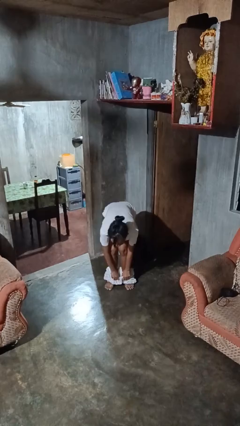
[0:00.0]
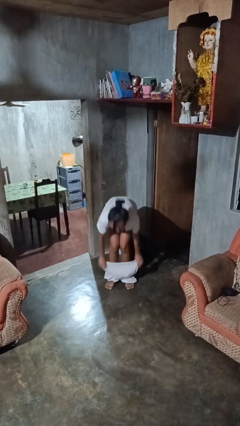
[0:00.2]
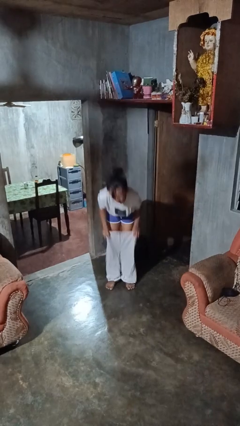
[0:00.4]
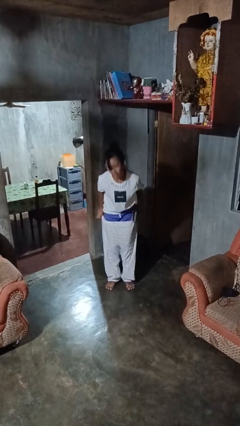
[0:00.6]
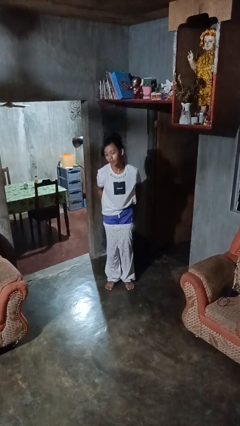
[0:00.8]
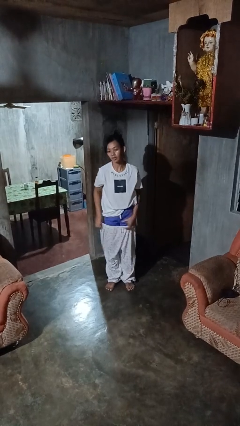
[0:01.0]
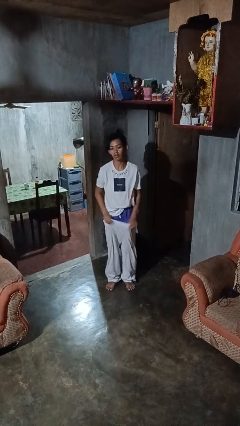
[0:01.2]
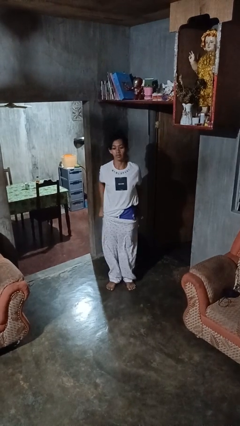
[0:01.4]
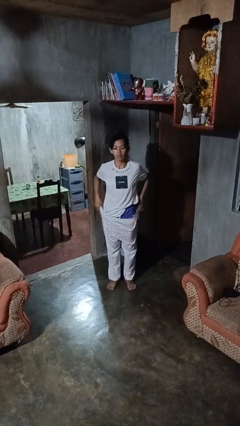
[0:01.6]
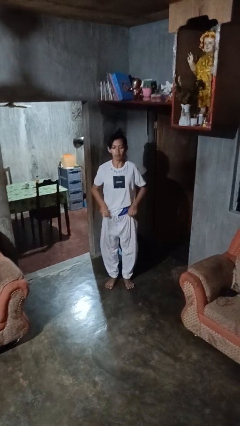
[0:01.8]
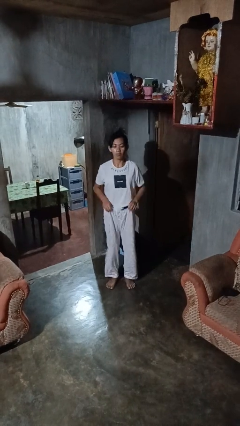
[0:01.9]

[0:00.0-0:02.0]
person puts on pants

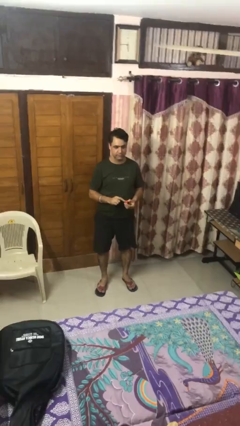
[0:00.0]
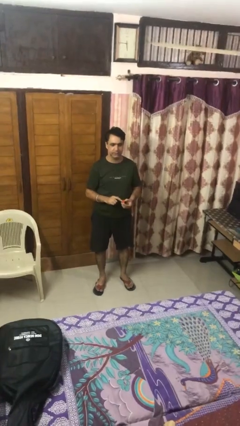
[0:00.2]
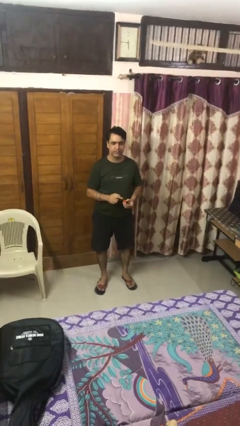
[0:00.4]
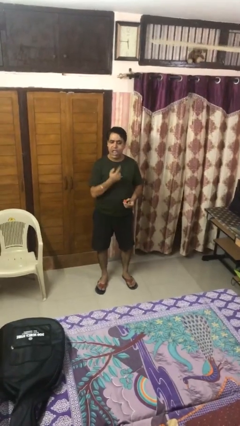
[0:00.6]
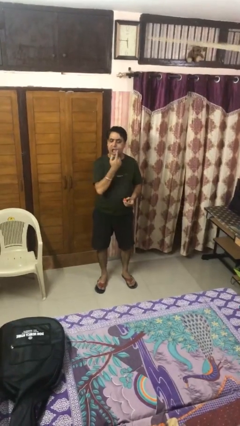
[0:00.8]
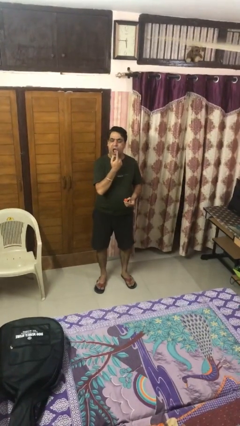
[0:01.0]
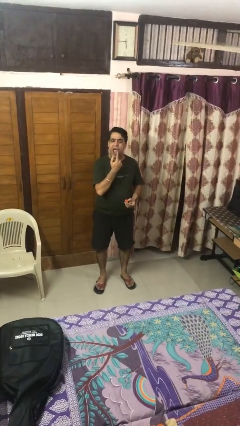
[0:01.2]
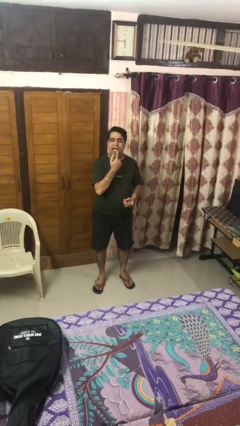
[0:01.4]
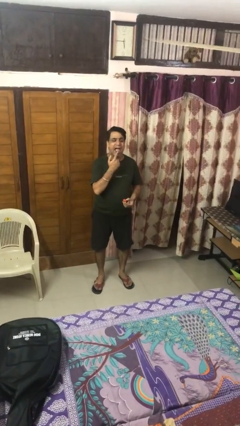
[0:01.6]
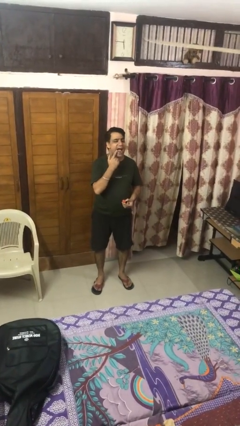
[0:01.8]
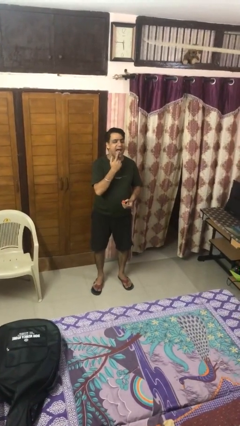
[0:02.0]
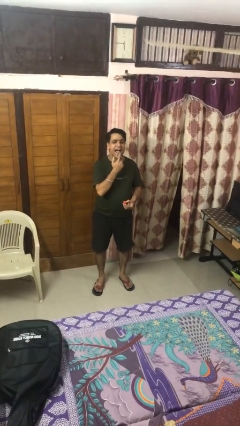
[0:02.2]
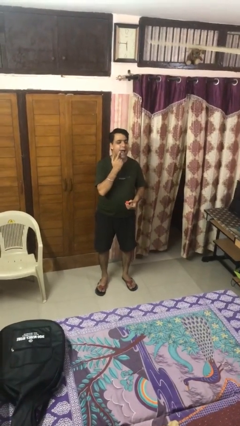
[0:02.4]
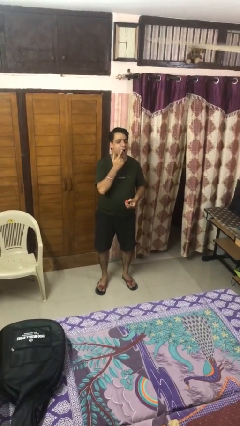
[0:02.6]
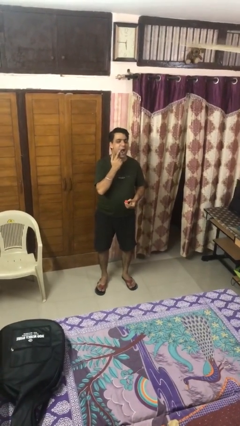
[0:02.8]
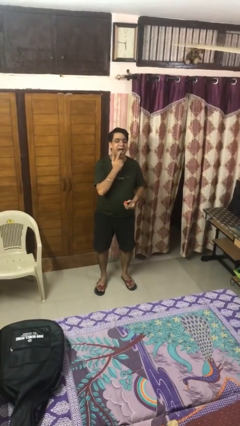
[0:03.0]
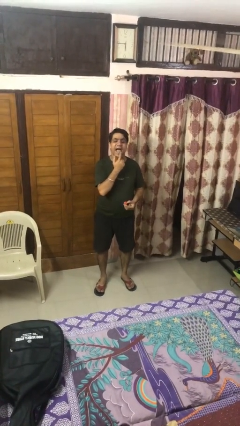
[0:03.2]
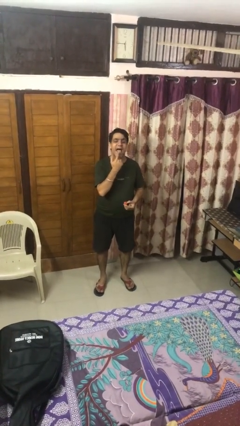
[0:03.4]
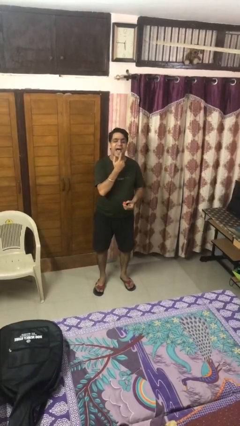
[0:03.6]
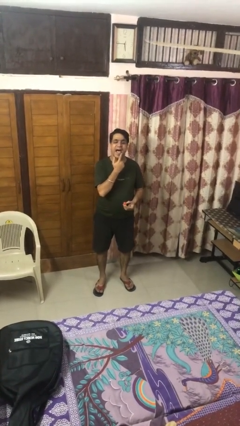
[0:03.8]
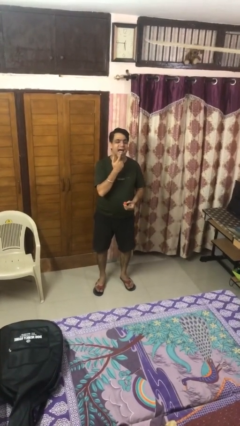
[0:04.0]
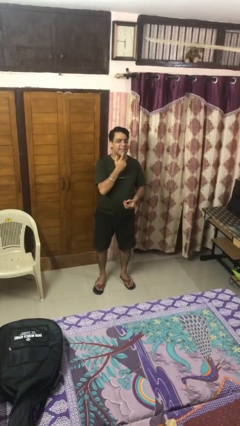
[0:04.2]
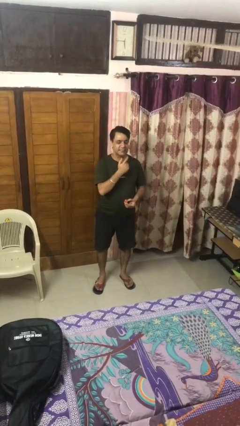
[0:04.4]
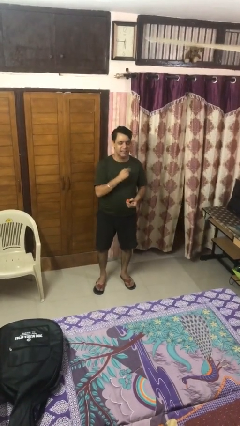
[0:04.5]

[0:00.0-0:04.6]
person applies lip makeup

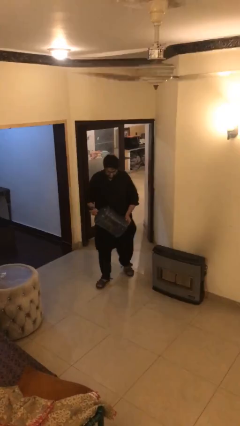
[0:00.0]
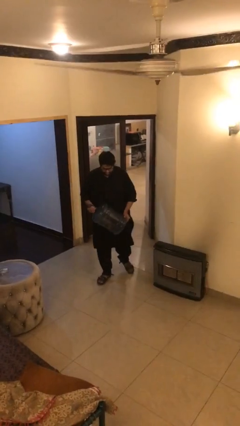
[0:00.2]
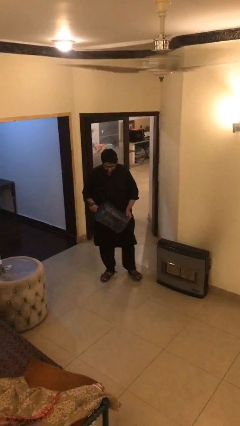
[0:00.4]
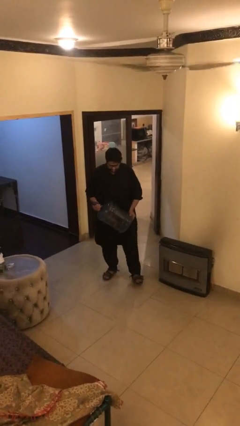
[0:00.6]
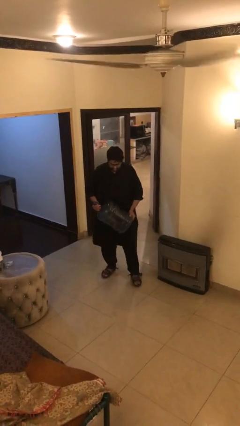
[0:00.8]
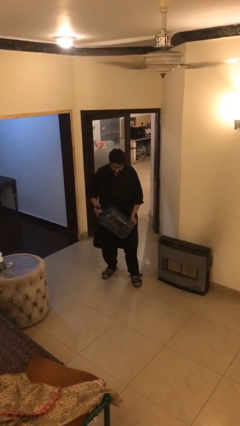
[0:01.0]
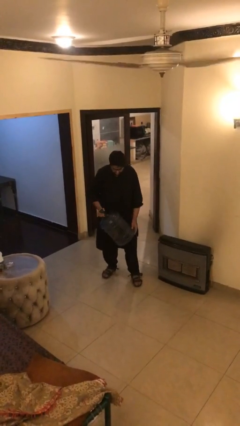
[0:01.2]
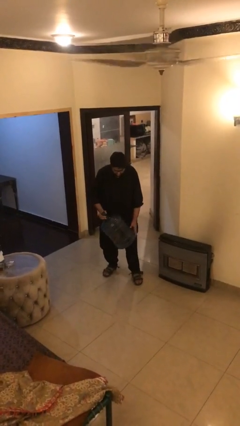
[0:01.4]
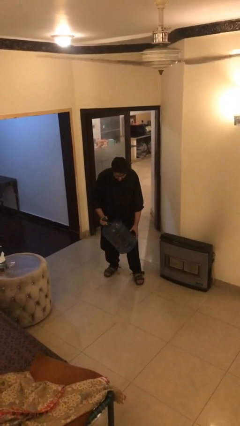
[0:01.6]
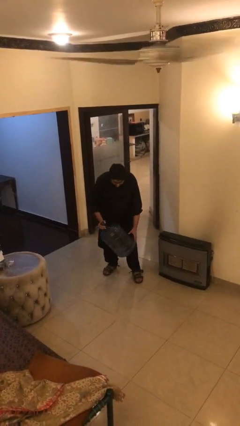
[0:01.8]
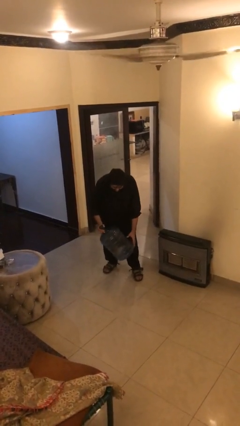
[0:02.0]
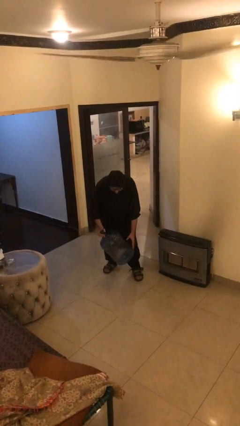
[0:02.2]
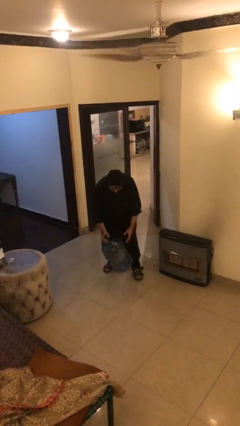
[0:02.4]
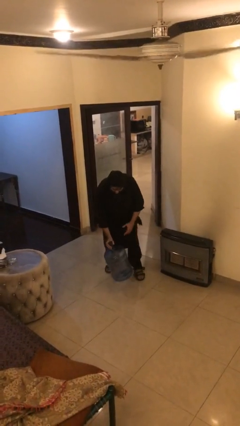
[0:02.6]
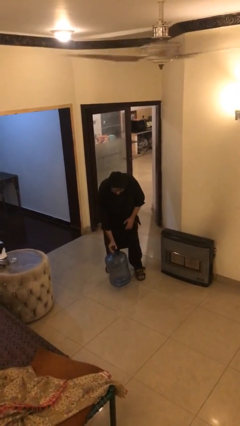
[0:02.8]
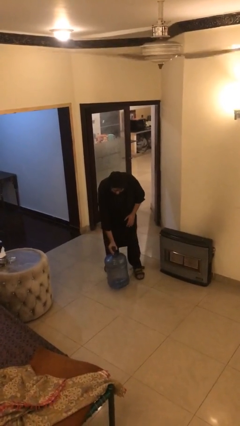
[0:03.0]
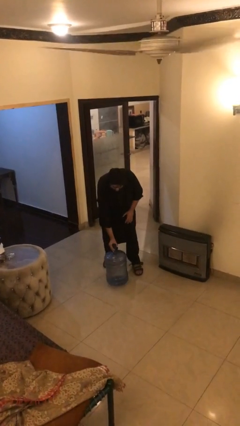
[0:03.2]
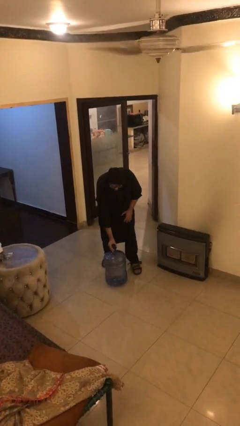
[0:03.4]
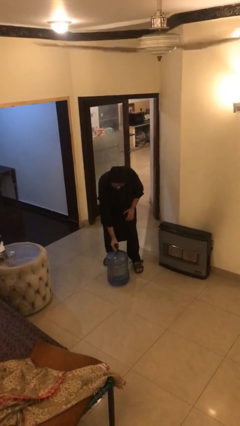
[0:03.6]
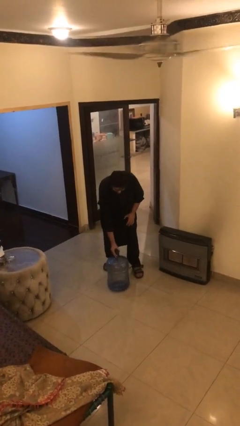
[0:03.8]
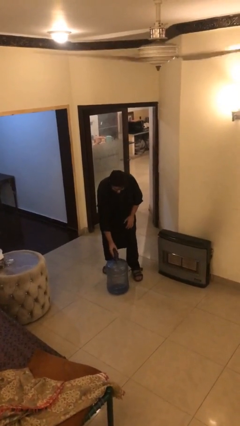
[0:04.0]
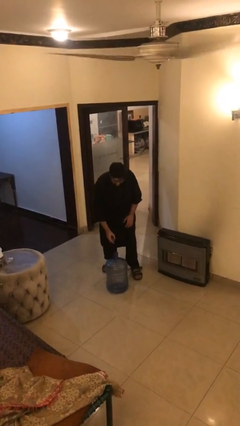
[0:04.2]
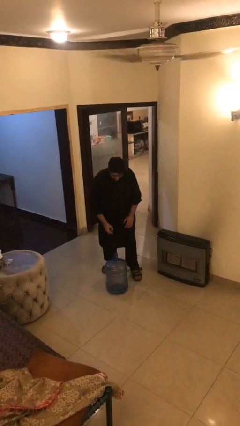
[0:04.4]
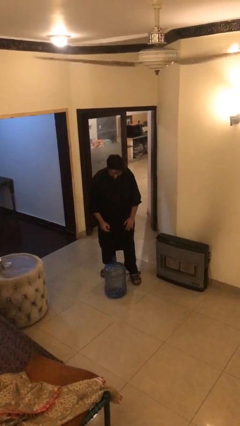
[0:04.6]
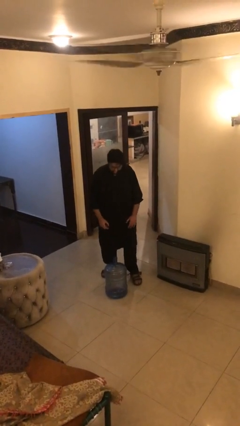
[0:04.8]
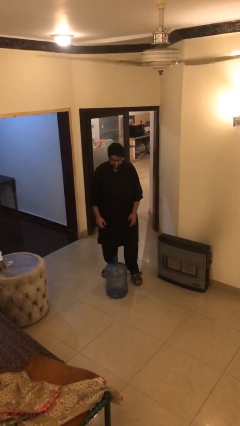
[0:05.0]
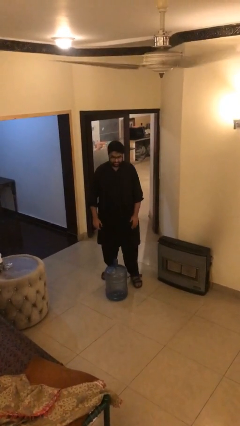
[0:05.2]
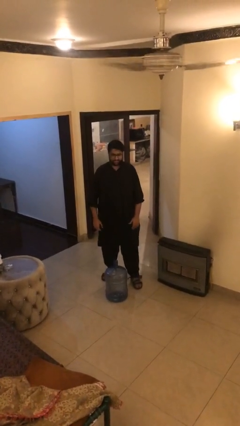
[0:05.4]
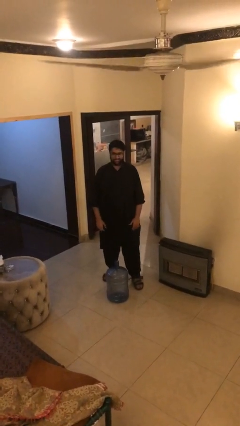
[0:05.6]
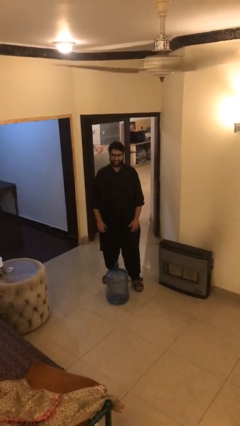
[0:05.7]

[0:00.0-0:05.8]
person puts down object on floor

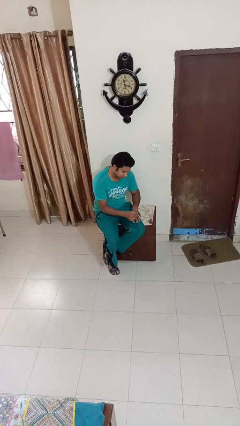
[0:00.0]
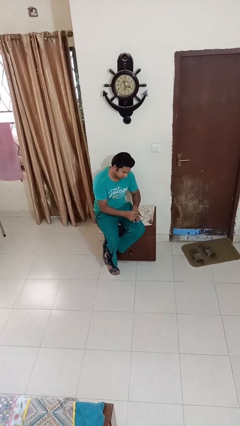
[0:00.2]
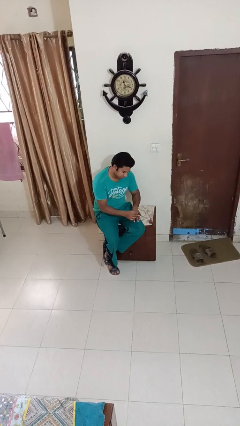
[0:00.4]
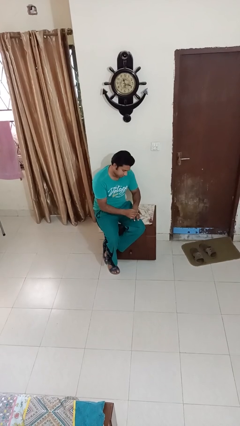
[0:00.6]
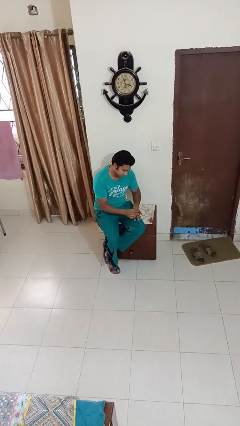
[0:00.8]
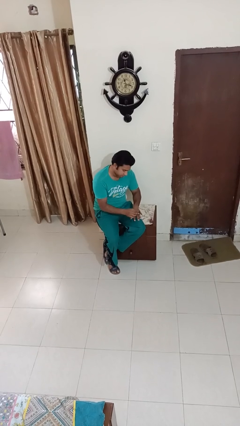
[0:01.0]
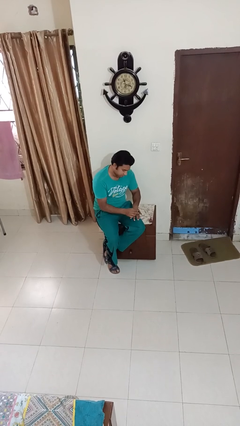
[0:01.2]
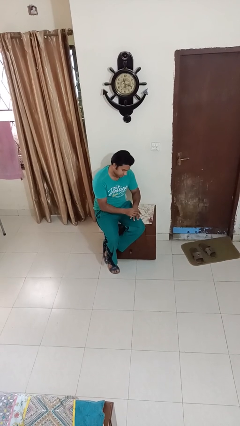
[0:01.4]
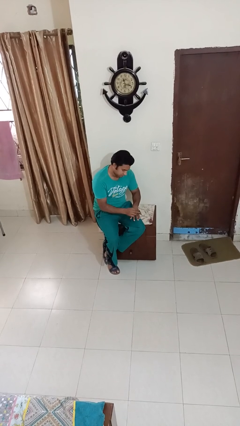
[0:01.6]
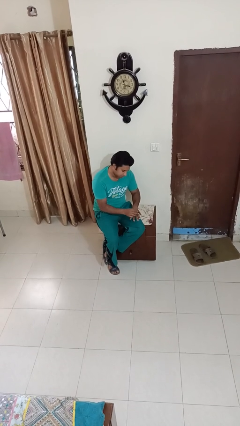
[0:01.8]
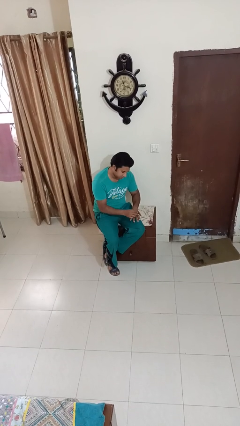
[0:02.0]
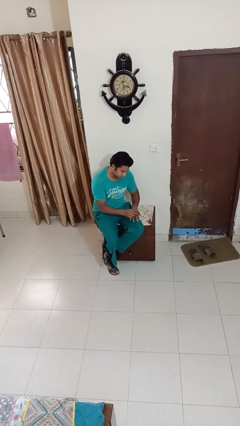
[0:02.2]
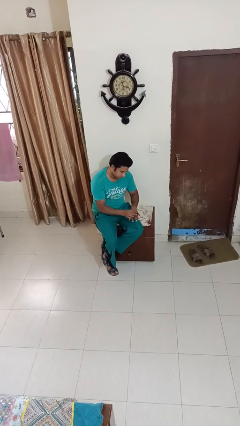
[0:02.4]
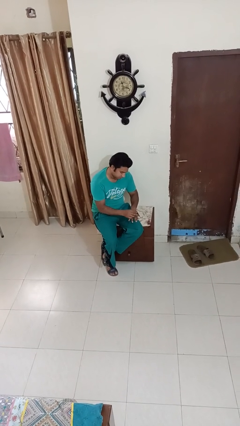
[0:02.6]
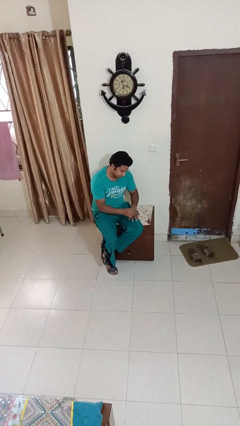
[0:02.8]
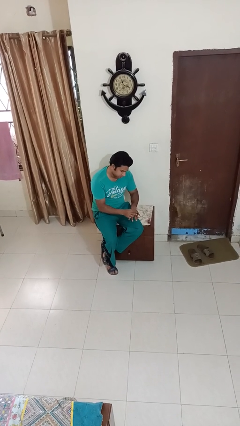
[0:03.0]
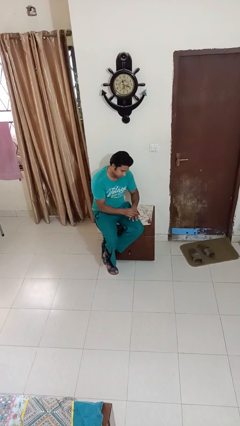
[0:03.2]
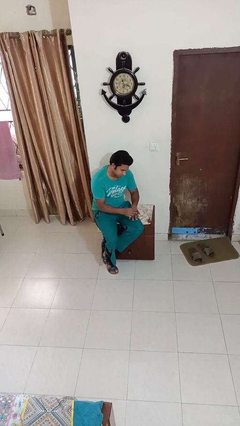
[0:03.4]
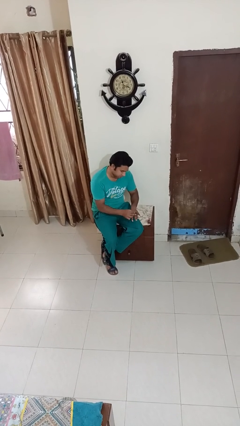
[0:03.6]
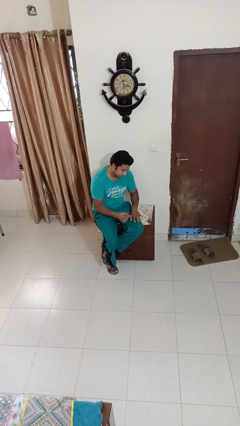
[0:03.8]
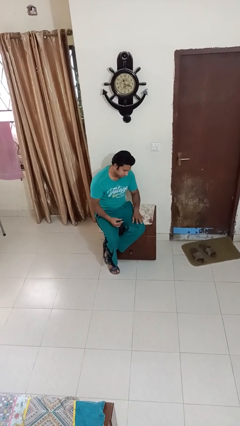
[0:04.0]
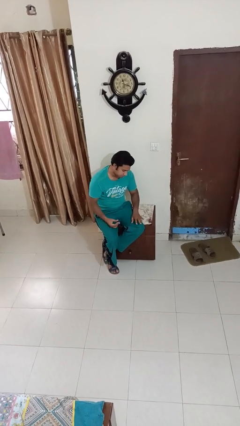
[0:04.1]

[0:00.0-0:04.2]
person paints fingernails

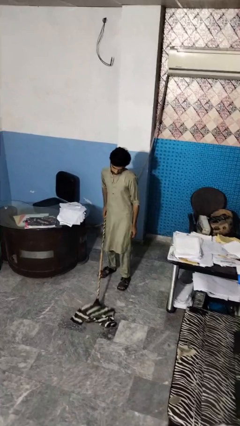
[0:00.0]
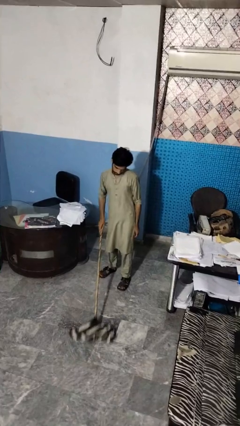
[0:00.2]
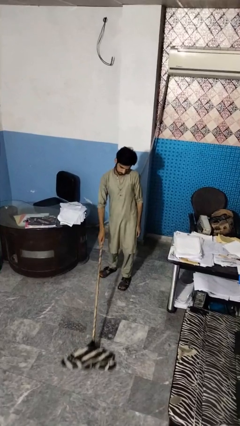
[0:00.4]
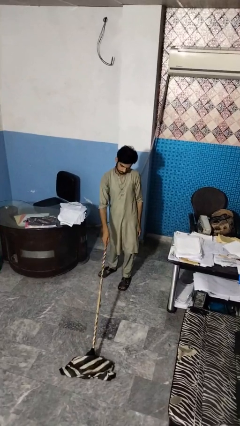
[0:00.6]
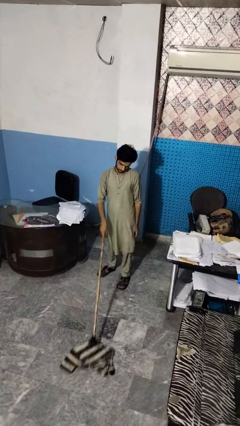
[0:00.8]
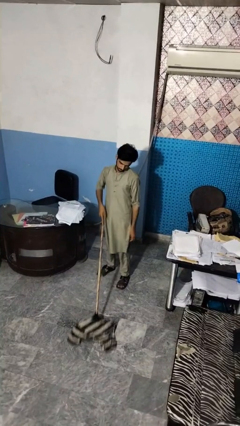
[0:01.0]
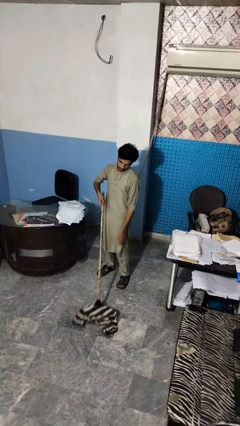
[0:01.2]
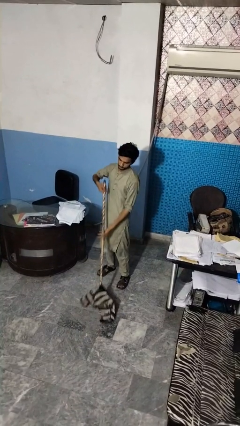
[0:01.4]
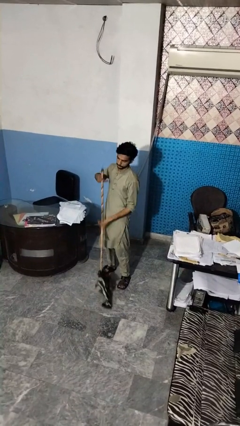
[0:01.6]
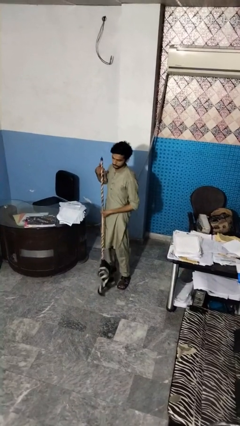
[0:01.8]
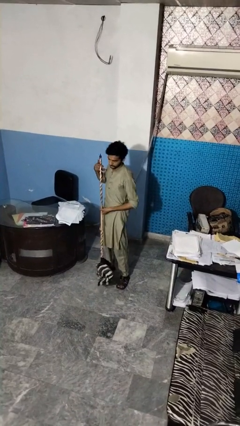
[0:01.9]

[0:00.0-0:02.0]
person mops
